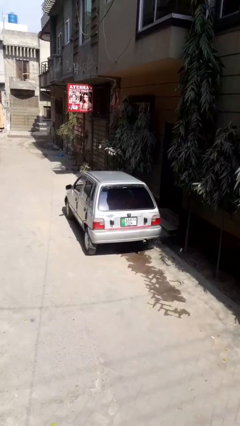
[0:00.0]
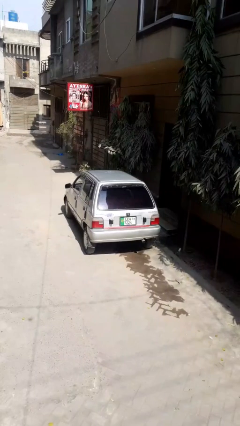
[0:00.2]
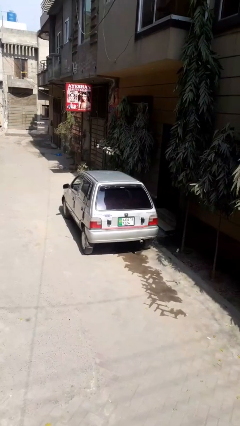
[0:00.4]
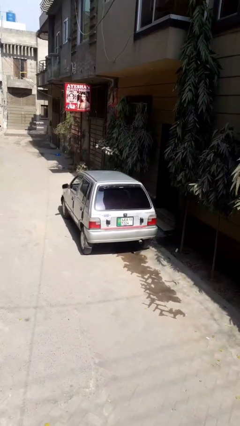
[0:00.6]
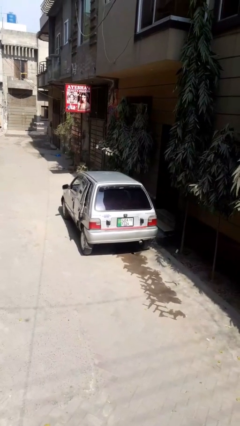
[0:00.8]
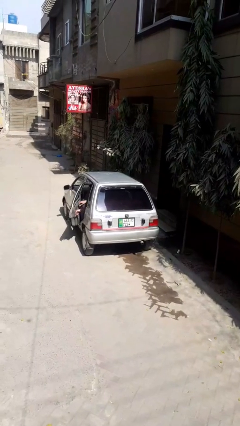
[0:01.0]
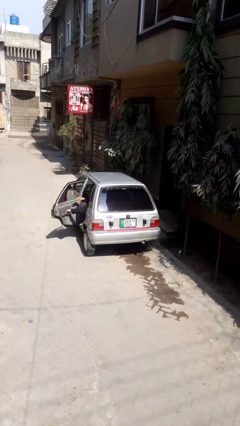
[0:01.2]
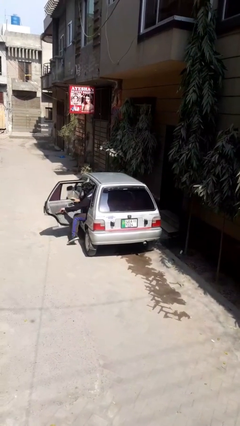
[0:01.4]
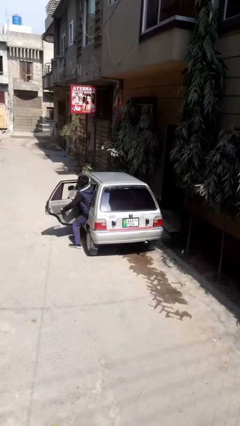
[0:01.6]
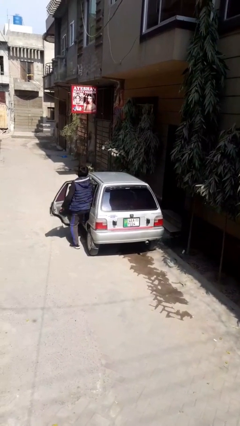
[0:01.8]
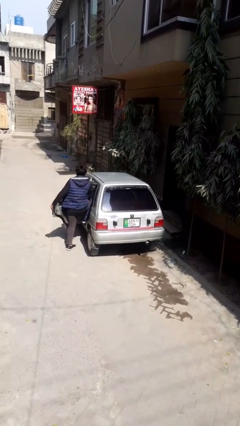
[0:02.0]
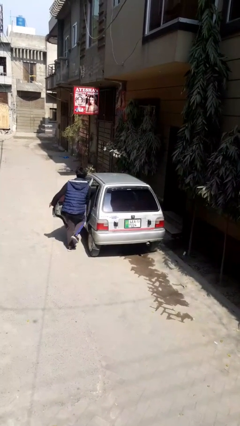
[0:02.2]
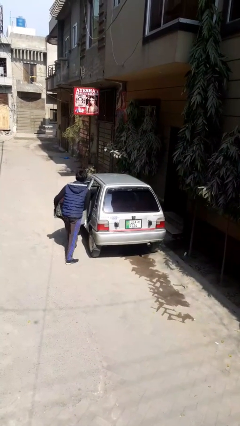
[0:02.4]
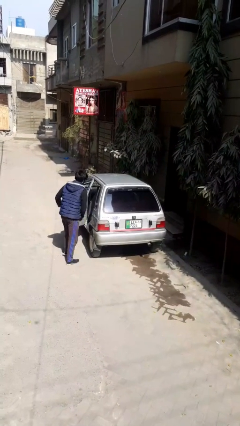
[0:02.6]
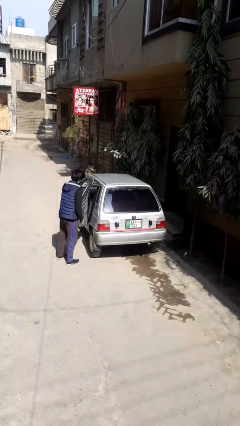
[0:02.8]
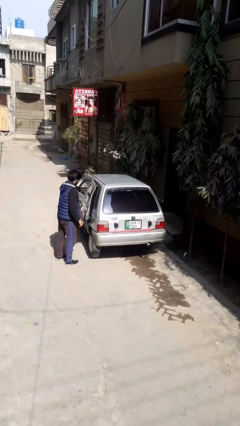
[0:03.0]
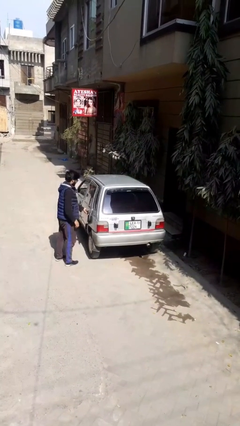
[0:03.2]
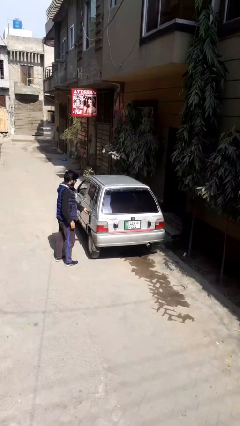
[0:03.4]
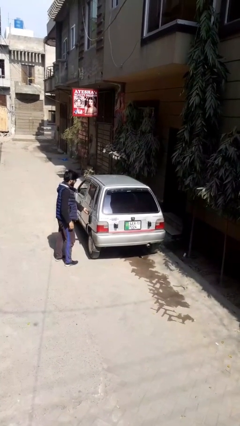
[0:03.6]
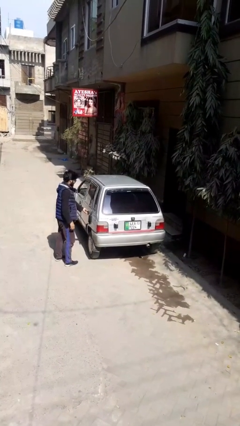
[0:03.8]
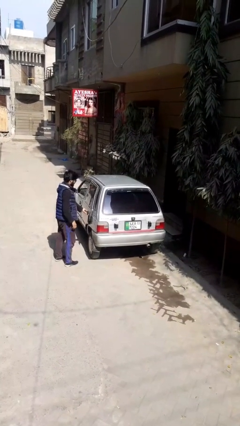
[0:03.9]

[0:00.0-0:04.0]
car drops off person

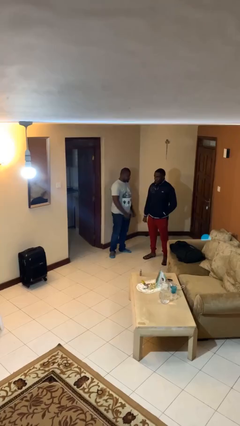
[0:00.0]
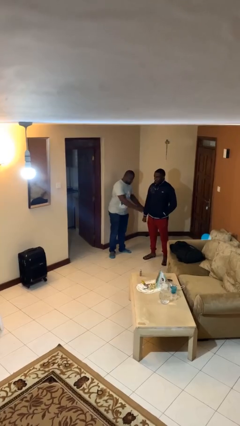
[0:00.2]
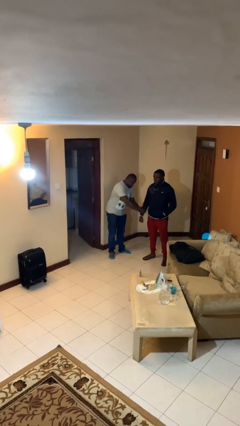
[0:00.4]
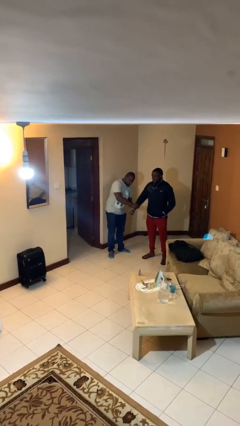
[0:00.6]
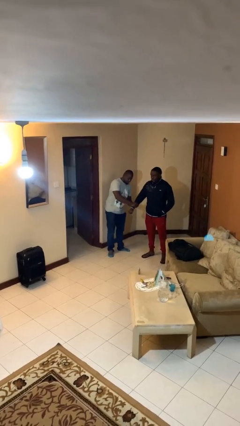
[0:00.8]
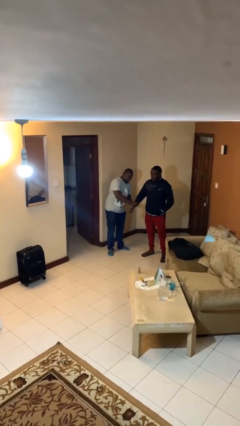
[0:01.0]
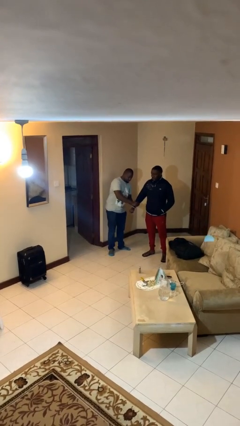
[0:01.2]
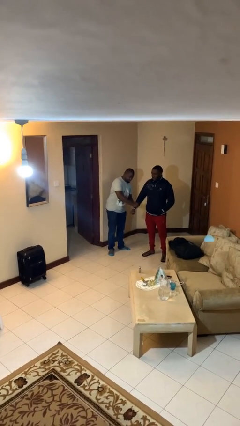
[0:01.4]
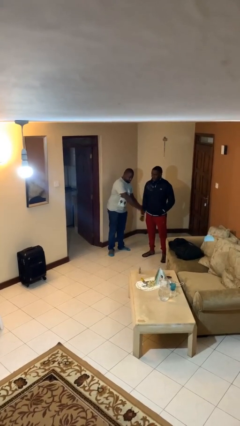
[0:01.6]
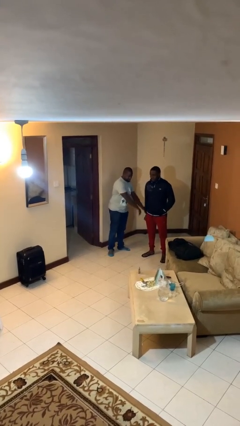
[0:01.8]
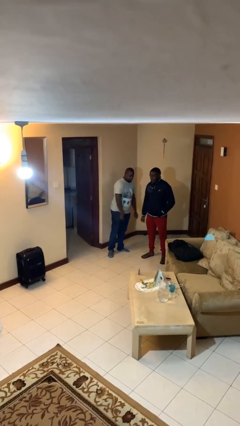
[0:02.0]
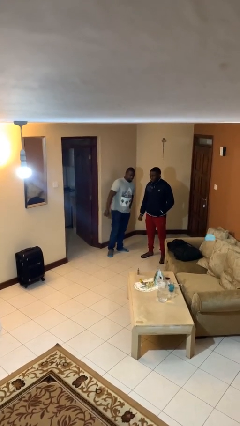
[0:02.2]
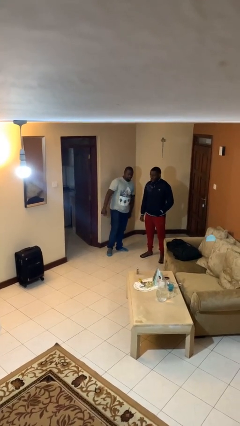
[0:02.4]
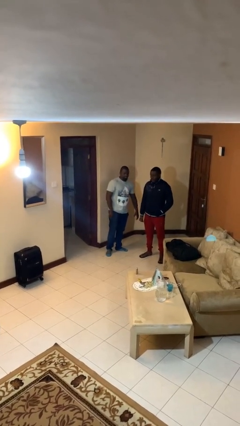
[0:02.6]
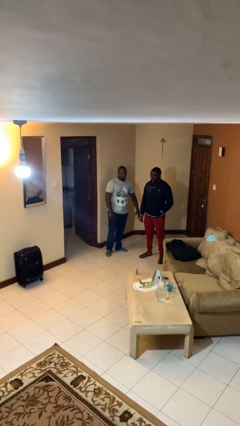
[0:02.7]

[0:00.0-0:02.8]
person grabs person by forearm

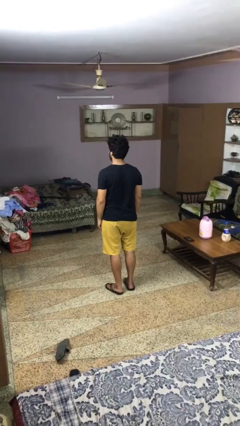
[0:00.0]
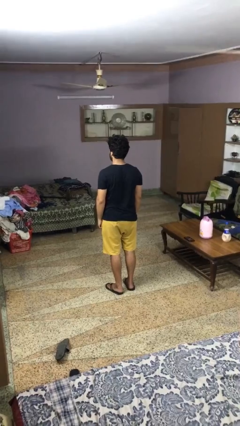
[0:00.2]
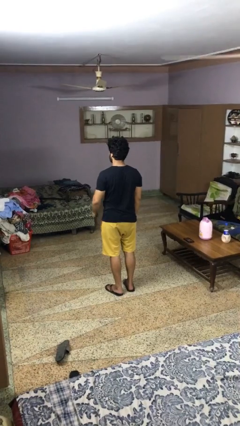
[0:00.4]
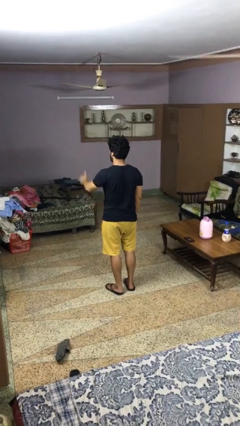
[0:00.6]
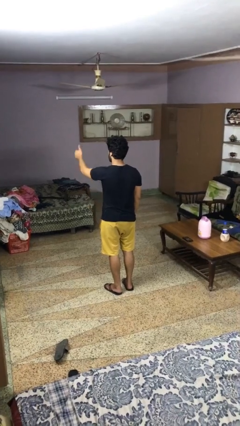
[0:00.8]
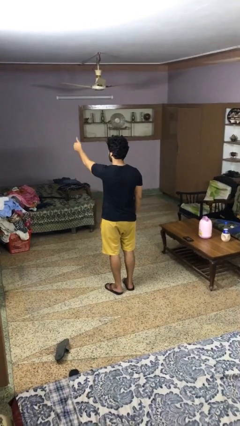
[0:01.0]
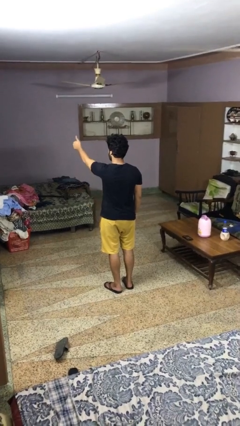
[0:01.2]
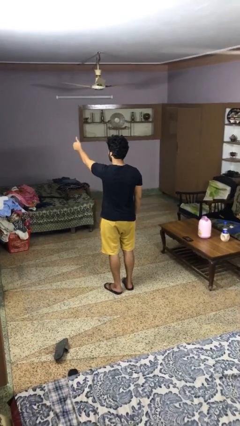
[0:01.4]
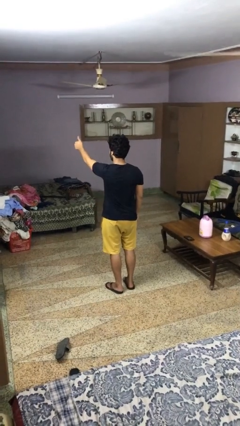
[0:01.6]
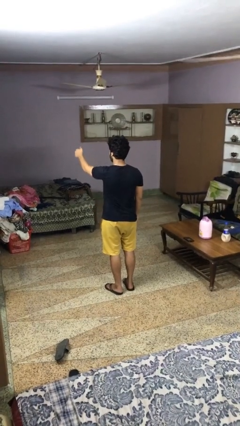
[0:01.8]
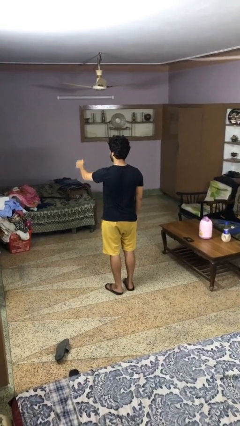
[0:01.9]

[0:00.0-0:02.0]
person gestures thumbs up

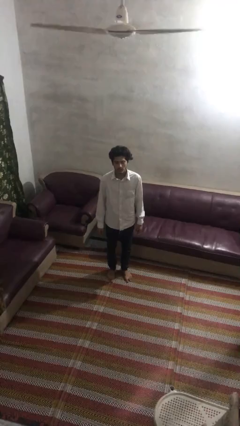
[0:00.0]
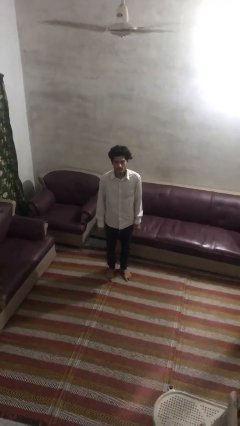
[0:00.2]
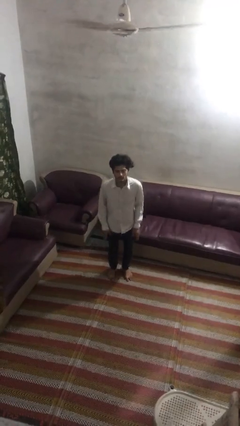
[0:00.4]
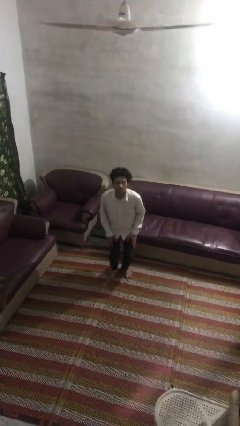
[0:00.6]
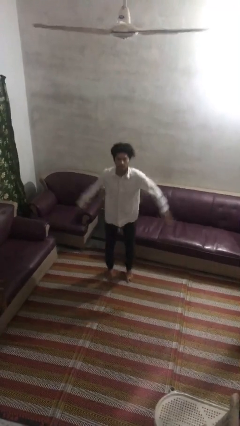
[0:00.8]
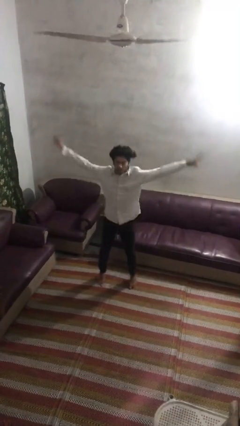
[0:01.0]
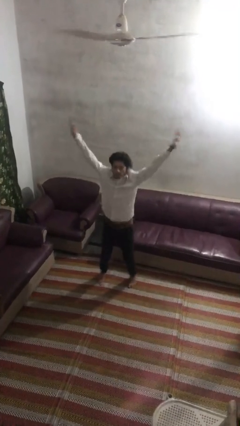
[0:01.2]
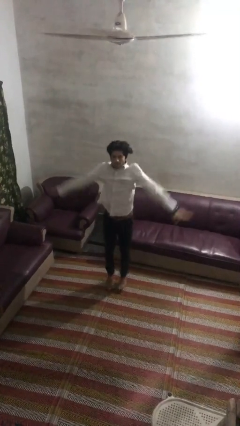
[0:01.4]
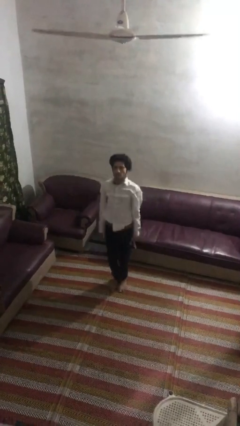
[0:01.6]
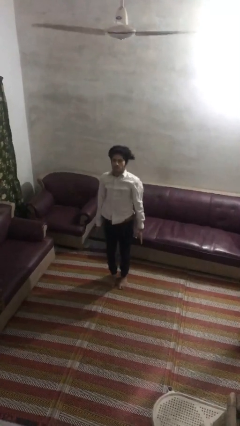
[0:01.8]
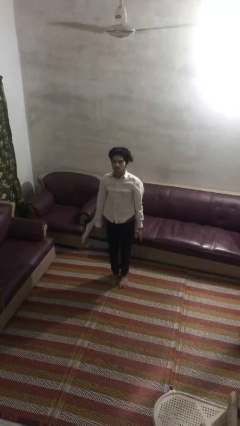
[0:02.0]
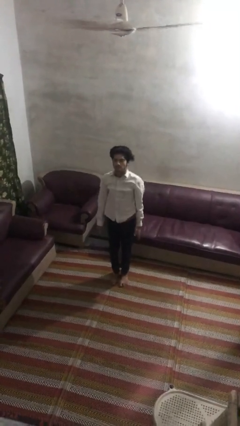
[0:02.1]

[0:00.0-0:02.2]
person exercises with jumping jacks

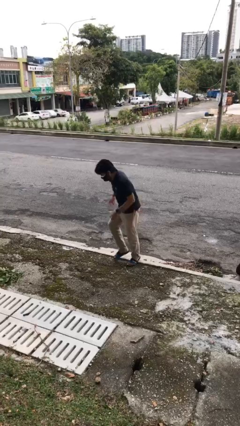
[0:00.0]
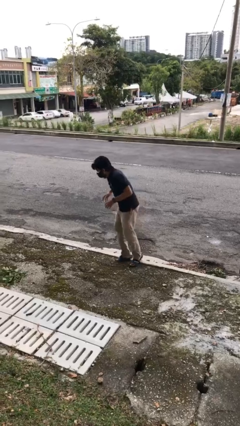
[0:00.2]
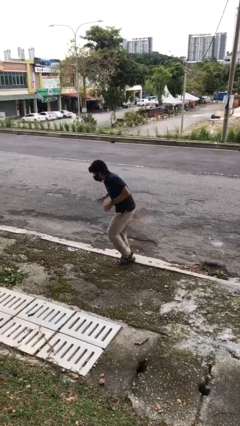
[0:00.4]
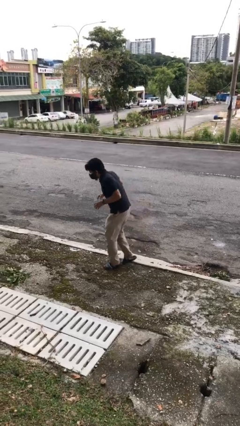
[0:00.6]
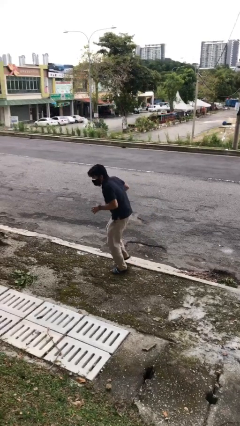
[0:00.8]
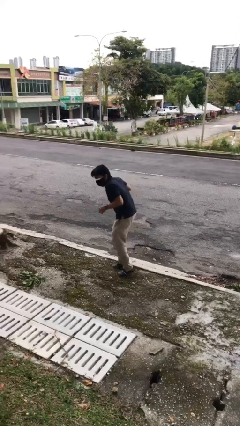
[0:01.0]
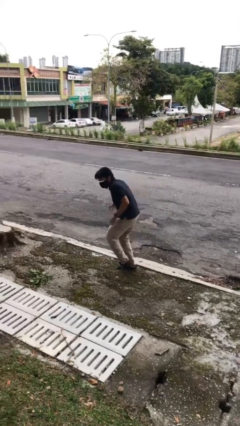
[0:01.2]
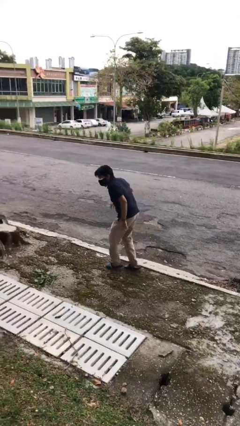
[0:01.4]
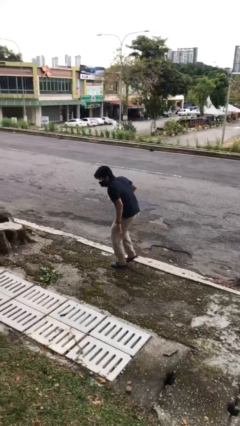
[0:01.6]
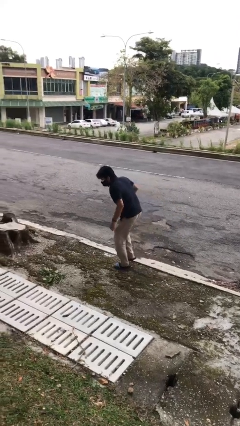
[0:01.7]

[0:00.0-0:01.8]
person walks tiptoe

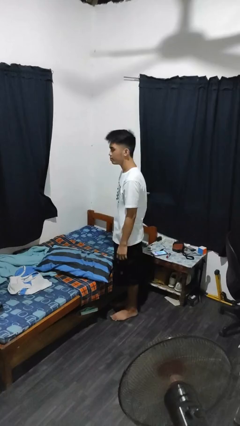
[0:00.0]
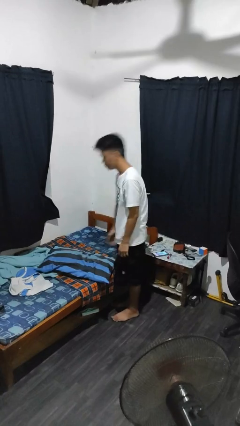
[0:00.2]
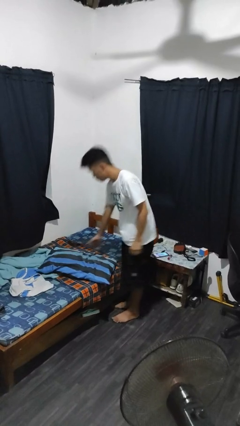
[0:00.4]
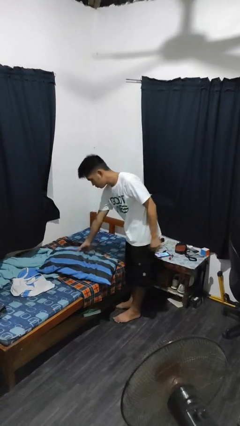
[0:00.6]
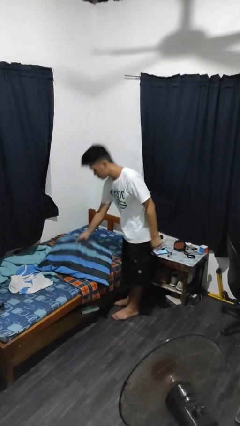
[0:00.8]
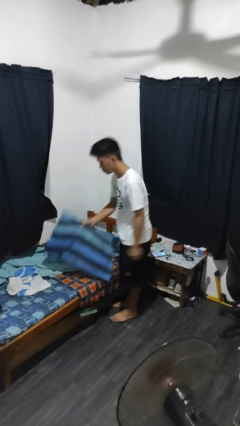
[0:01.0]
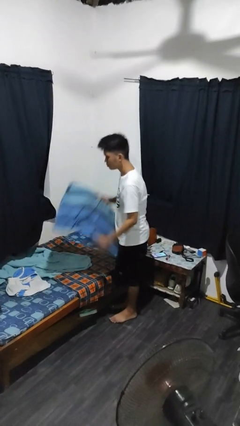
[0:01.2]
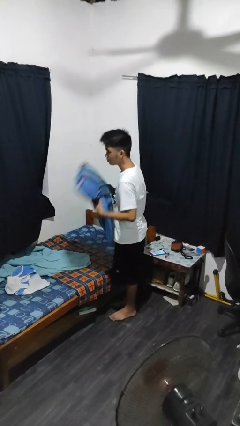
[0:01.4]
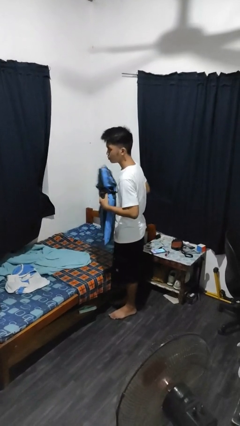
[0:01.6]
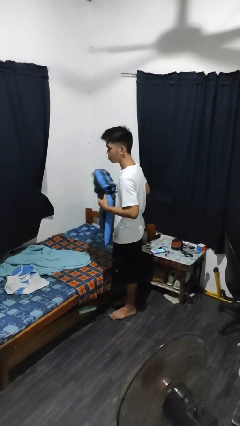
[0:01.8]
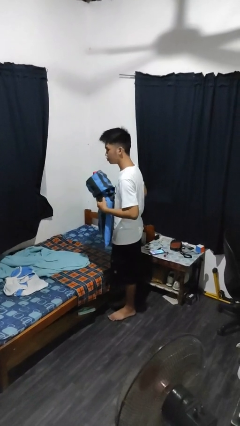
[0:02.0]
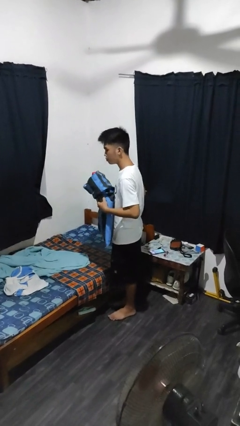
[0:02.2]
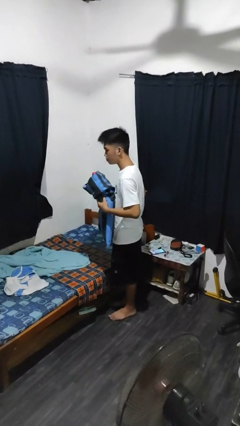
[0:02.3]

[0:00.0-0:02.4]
person picks up object from bed

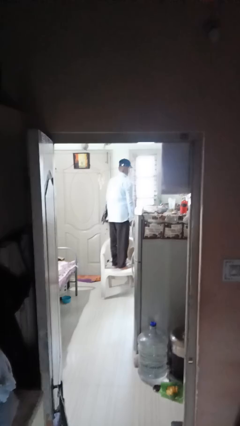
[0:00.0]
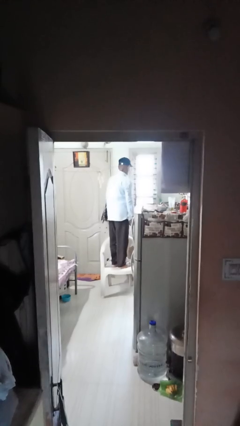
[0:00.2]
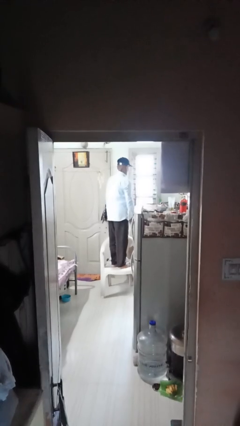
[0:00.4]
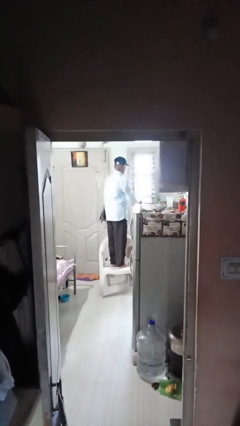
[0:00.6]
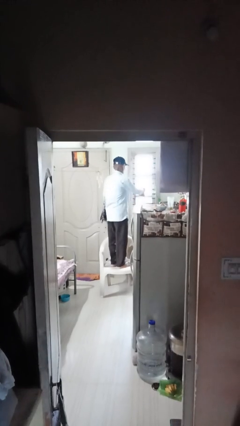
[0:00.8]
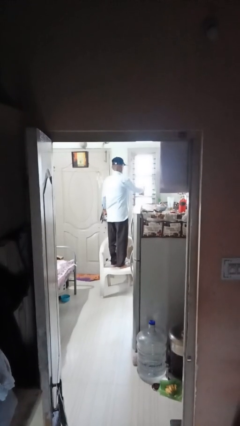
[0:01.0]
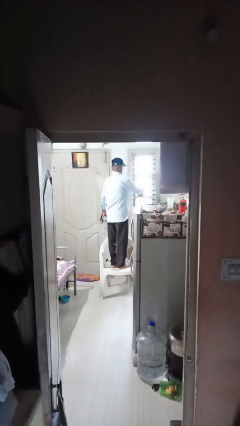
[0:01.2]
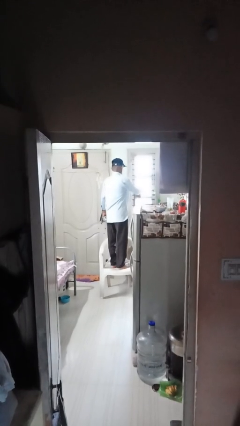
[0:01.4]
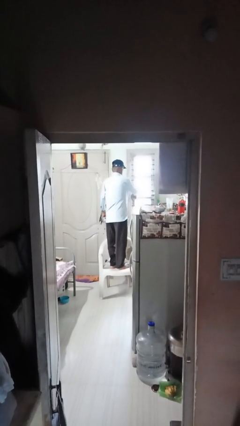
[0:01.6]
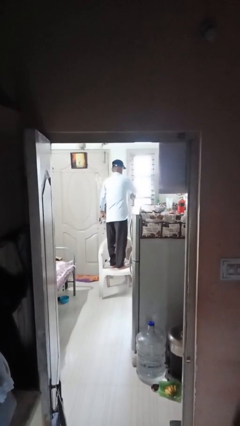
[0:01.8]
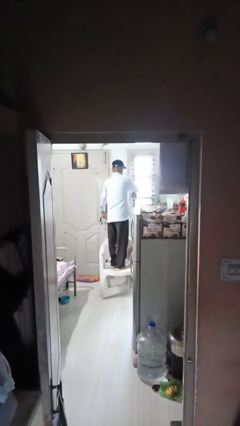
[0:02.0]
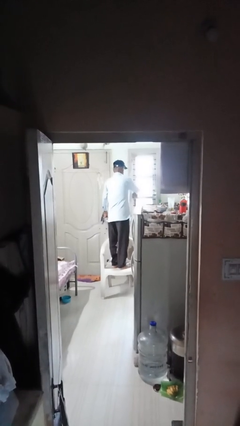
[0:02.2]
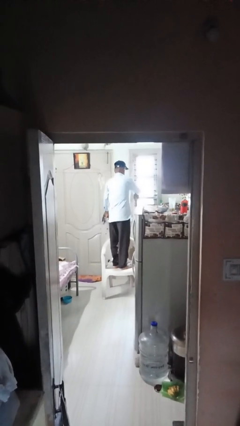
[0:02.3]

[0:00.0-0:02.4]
person sprays from bottle
